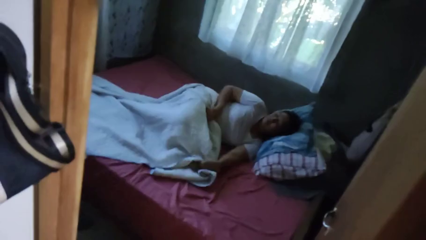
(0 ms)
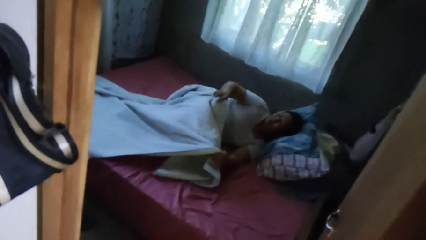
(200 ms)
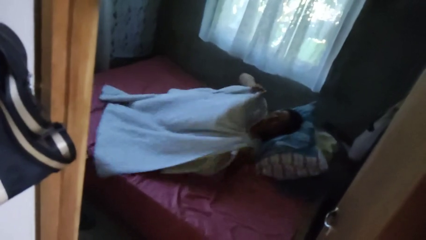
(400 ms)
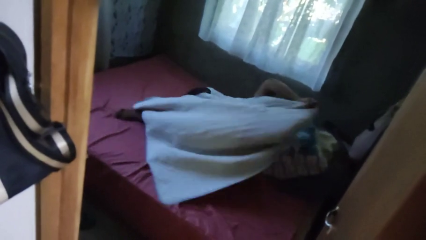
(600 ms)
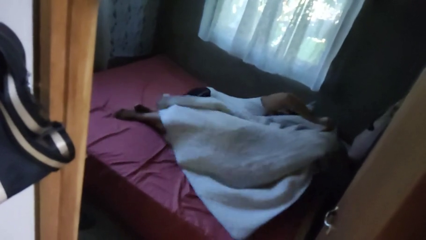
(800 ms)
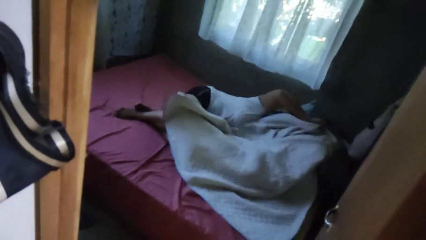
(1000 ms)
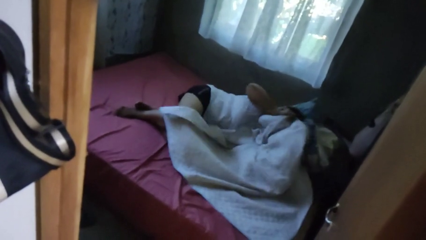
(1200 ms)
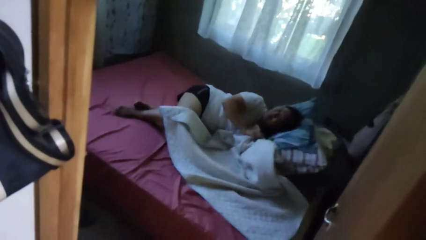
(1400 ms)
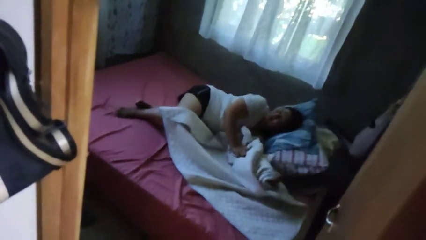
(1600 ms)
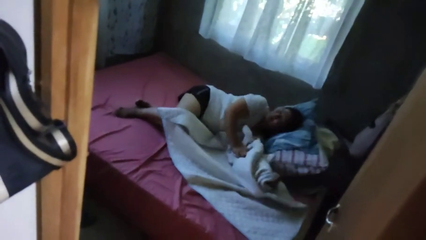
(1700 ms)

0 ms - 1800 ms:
person uncovers with bedsheets

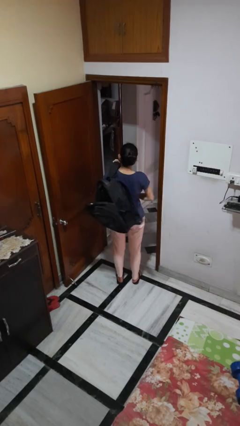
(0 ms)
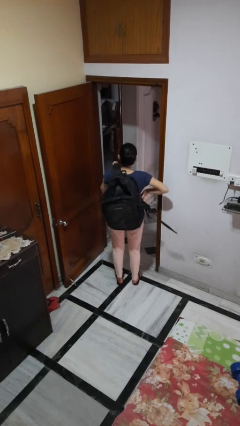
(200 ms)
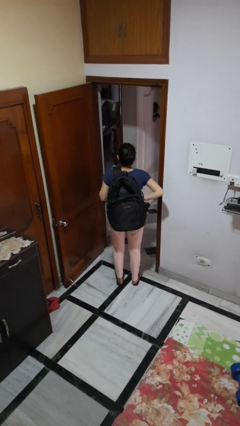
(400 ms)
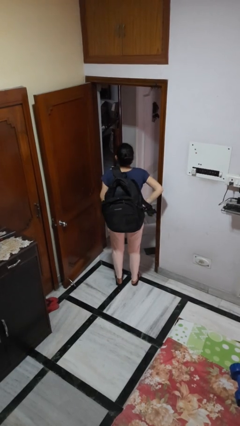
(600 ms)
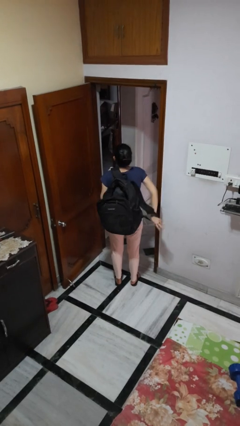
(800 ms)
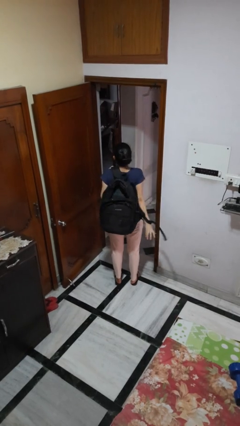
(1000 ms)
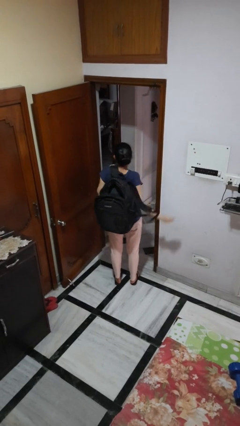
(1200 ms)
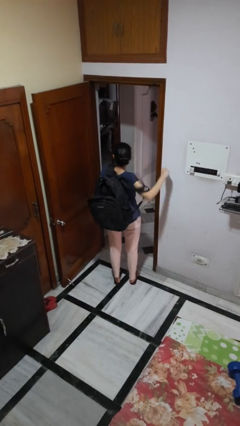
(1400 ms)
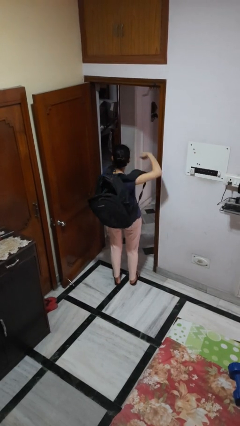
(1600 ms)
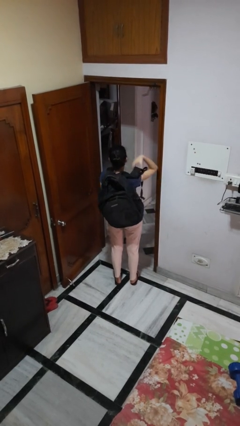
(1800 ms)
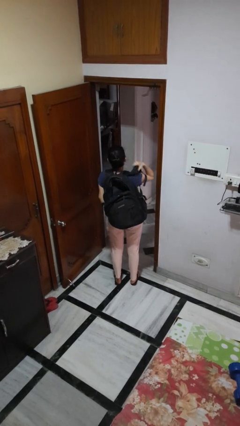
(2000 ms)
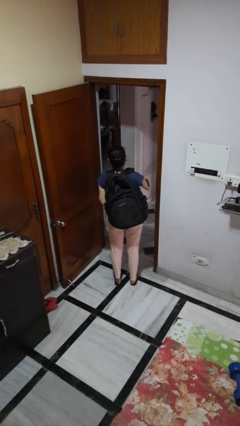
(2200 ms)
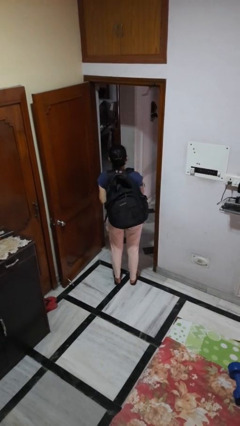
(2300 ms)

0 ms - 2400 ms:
person puts on backpack

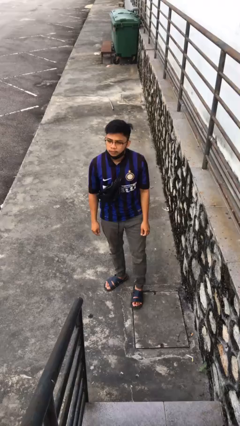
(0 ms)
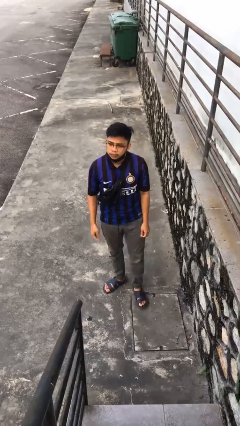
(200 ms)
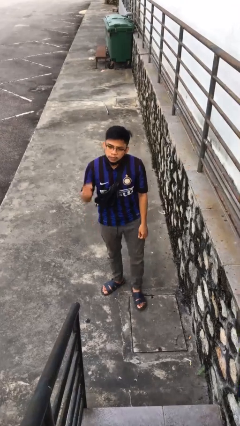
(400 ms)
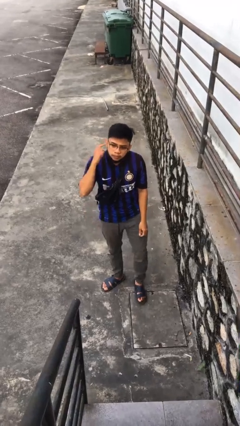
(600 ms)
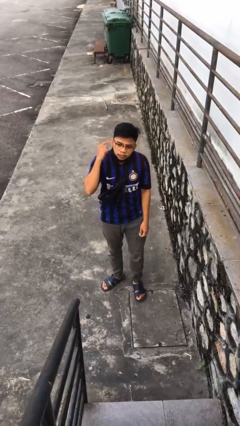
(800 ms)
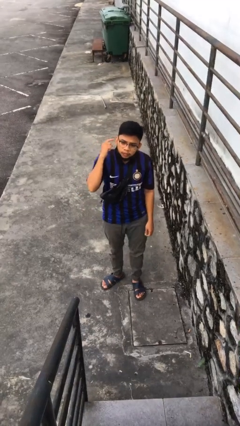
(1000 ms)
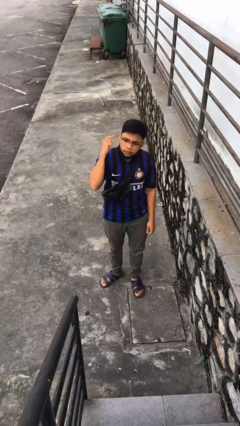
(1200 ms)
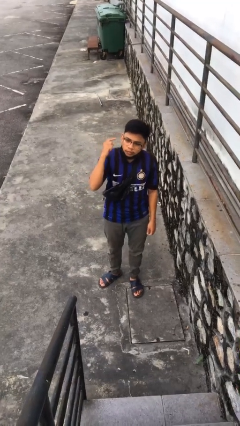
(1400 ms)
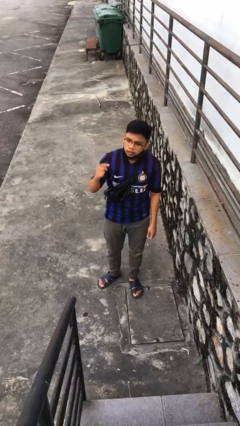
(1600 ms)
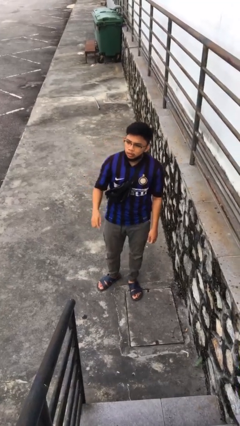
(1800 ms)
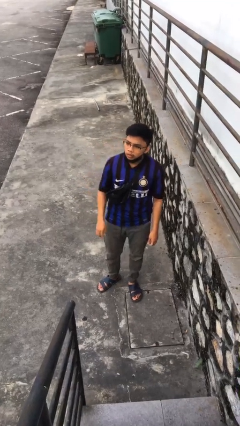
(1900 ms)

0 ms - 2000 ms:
person gestures listen closely

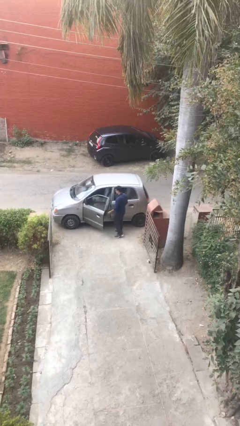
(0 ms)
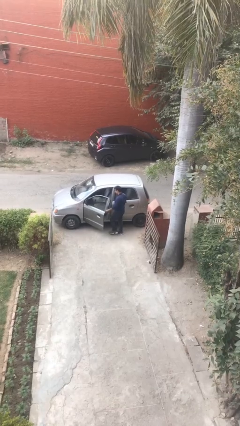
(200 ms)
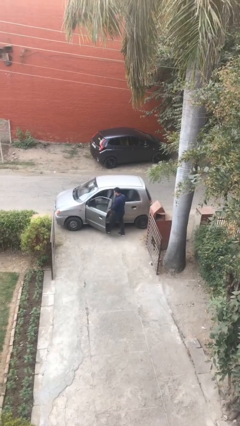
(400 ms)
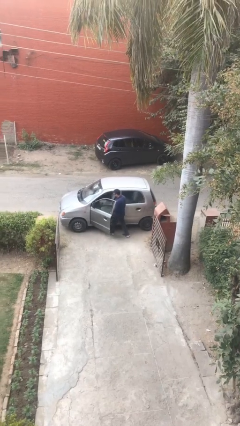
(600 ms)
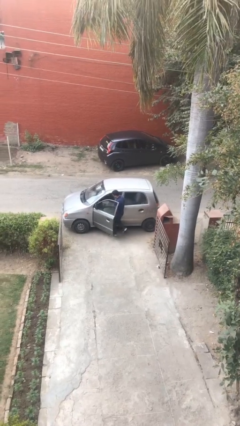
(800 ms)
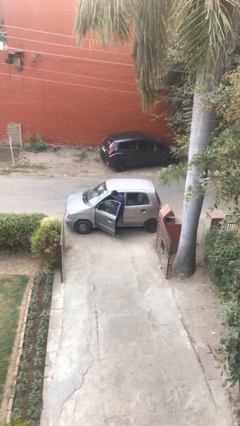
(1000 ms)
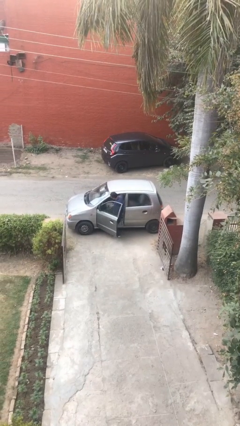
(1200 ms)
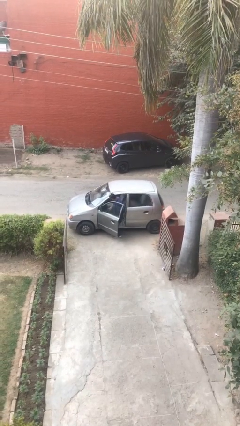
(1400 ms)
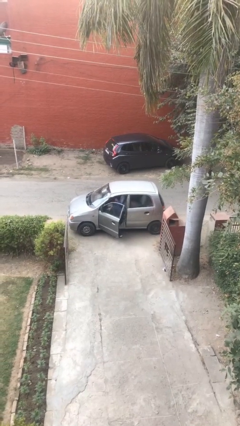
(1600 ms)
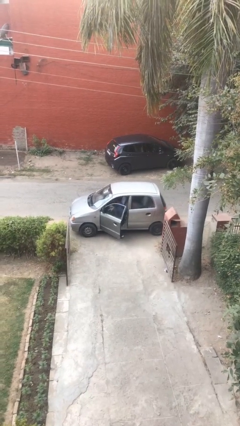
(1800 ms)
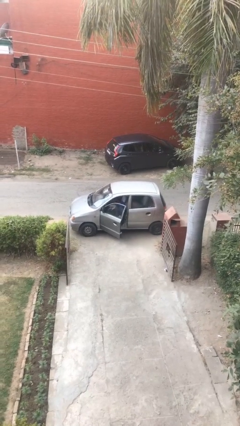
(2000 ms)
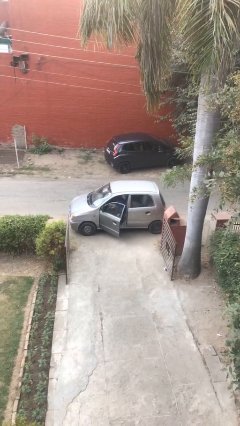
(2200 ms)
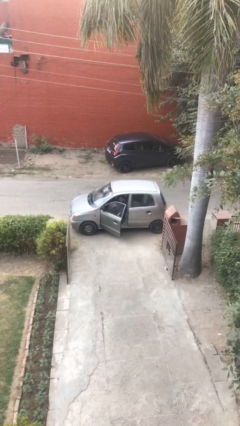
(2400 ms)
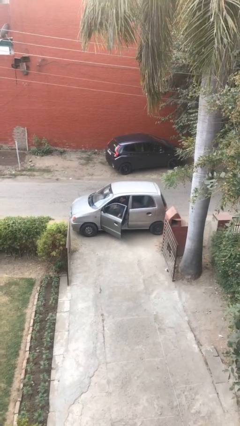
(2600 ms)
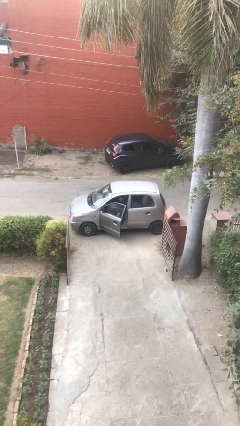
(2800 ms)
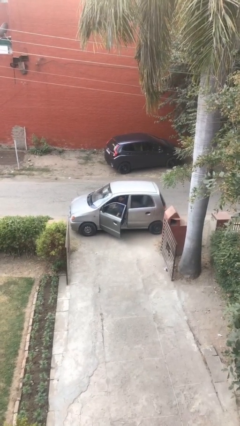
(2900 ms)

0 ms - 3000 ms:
person enters car

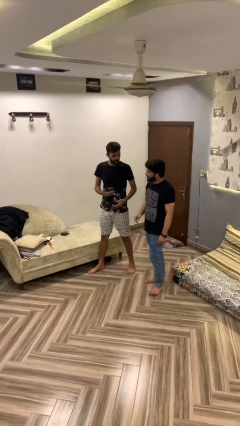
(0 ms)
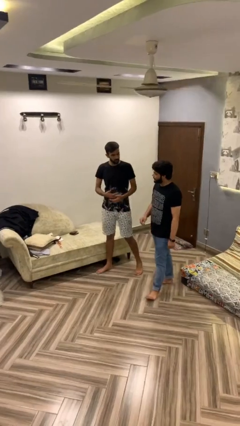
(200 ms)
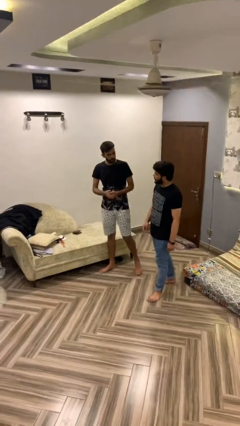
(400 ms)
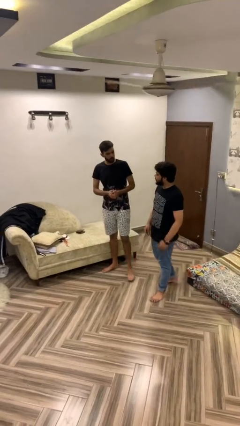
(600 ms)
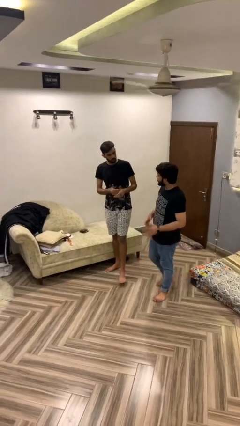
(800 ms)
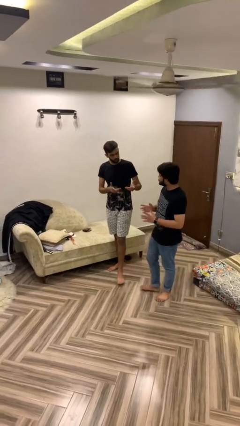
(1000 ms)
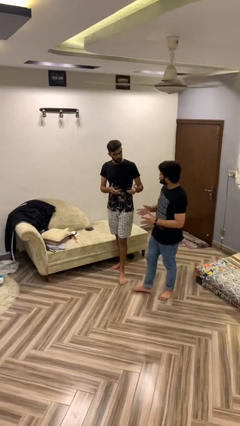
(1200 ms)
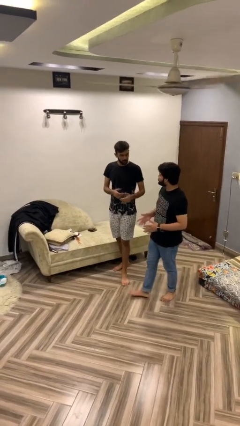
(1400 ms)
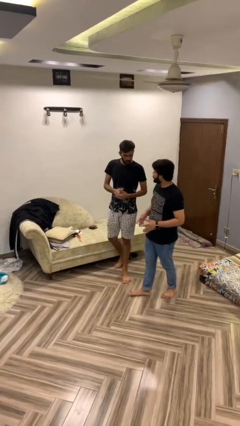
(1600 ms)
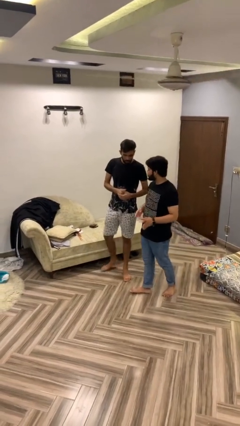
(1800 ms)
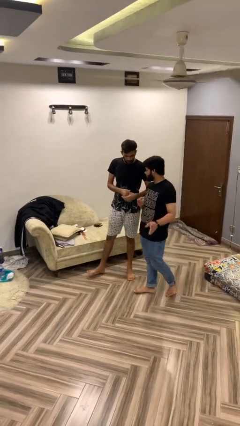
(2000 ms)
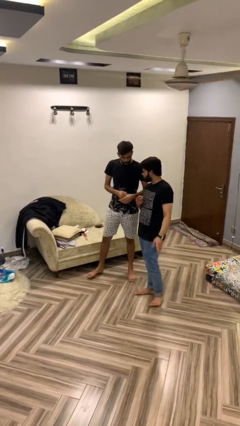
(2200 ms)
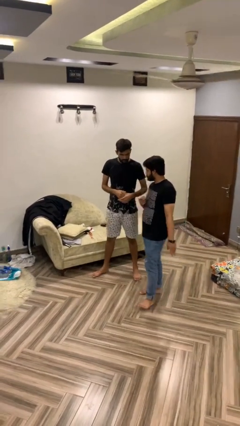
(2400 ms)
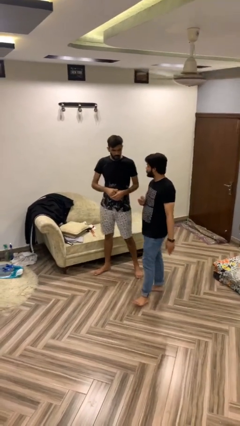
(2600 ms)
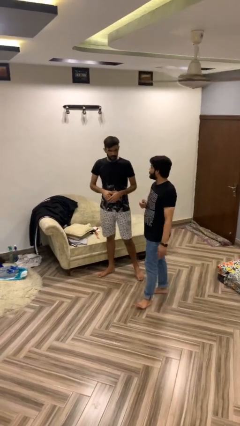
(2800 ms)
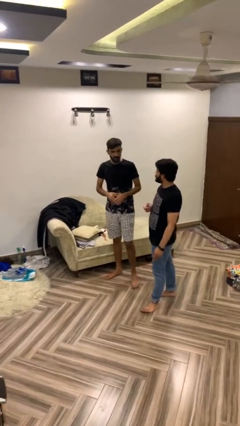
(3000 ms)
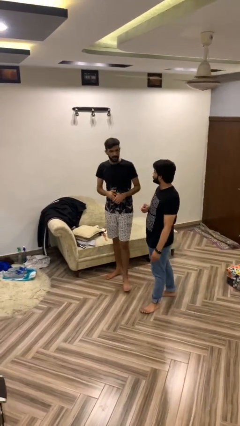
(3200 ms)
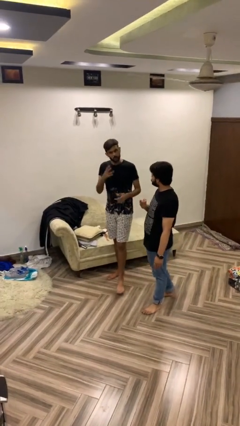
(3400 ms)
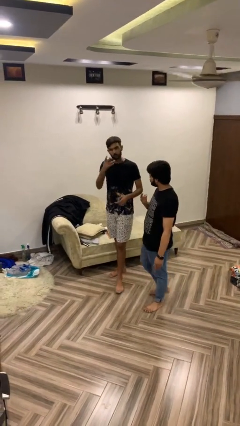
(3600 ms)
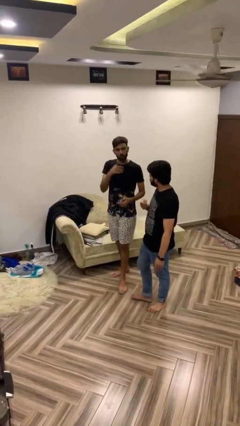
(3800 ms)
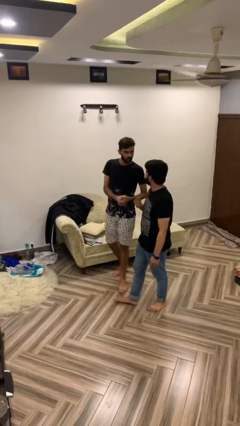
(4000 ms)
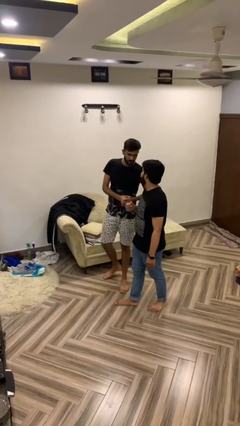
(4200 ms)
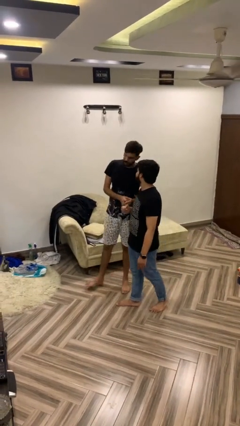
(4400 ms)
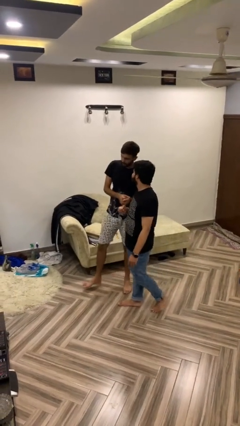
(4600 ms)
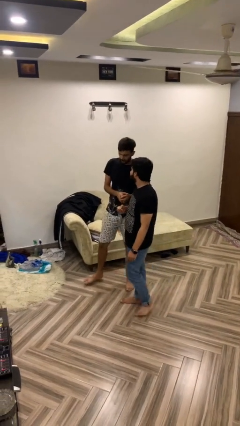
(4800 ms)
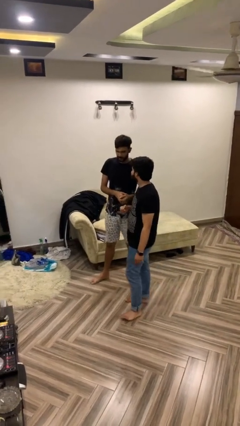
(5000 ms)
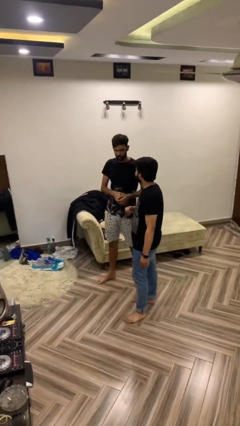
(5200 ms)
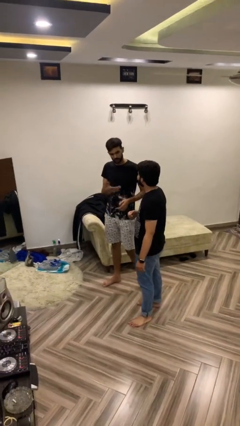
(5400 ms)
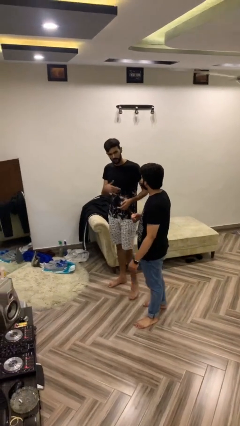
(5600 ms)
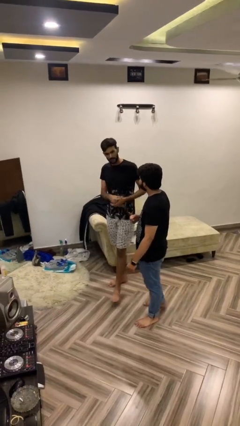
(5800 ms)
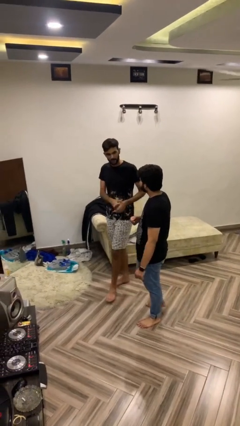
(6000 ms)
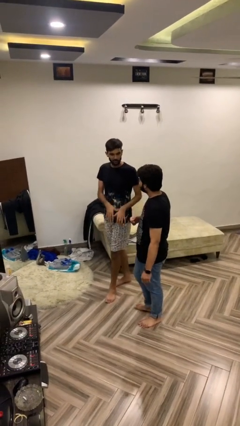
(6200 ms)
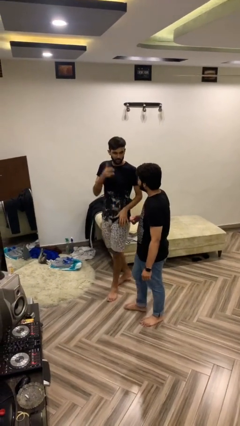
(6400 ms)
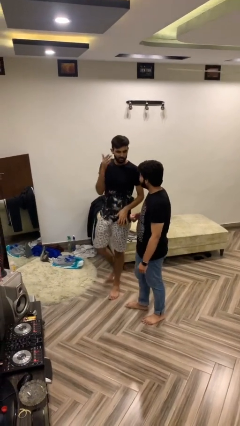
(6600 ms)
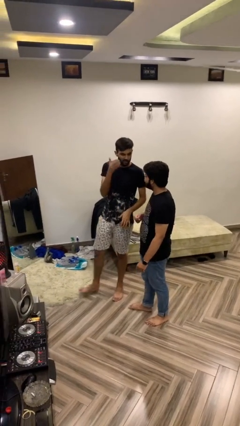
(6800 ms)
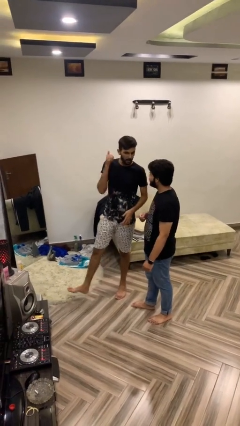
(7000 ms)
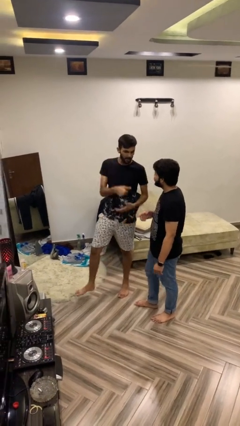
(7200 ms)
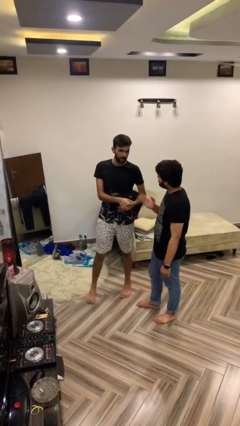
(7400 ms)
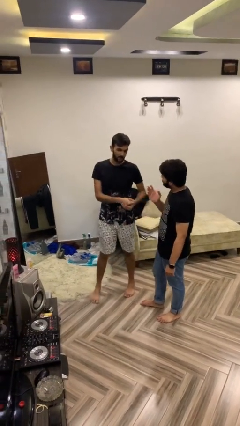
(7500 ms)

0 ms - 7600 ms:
person talks to person

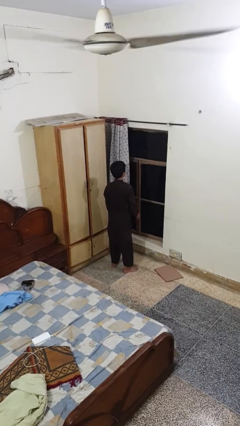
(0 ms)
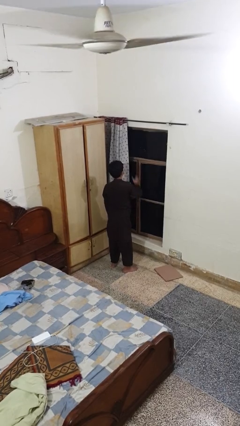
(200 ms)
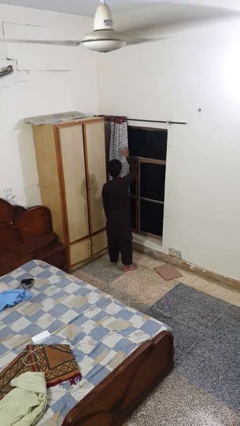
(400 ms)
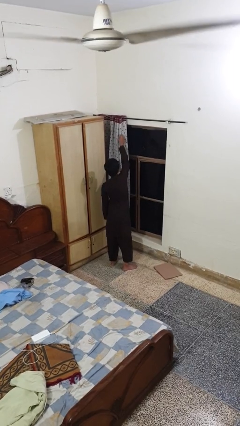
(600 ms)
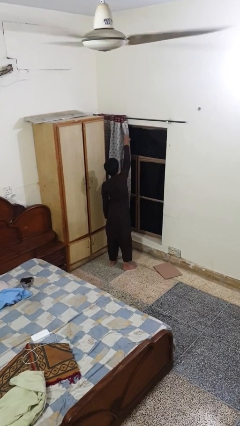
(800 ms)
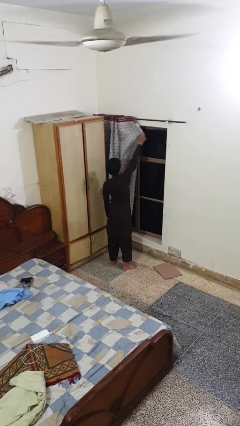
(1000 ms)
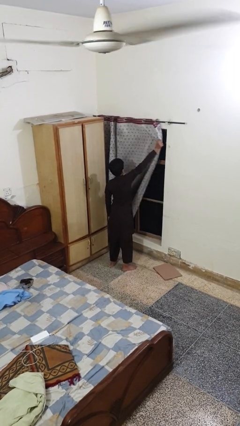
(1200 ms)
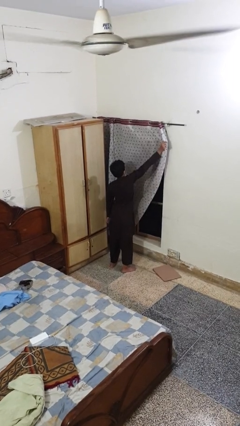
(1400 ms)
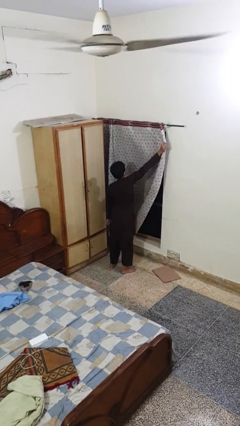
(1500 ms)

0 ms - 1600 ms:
person closes curtains
